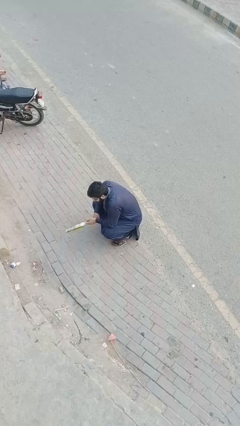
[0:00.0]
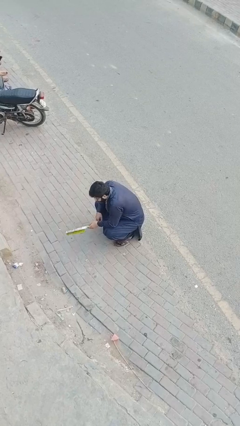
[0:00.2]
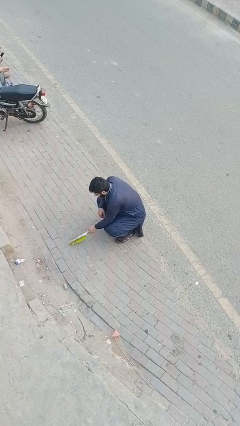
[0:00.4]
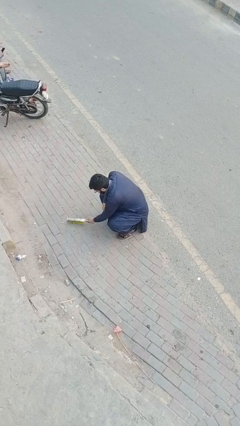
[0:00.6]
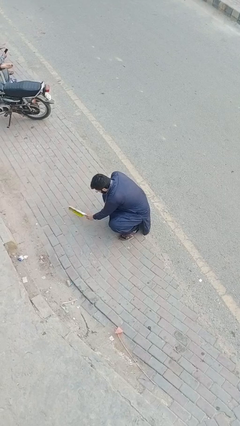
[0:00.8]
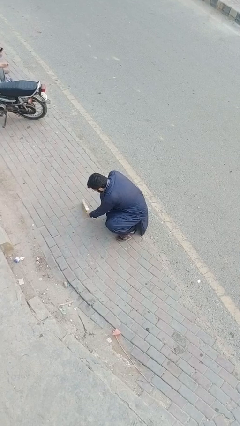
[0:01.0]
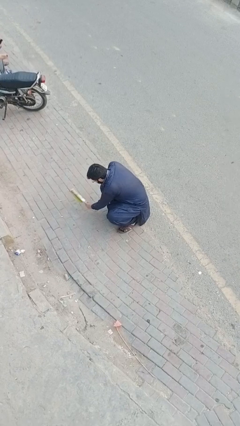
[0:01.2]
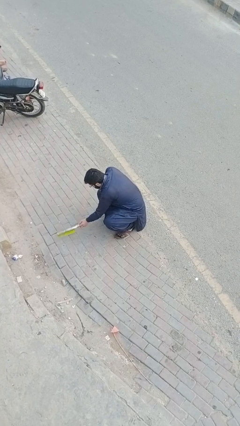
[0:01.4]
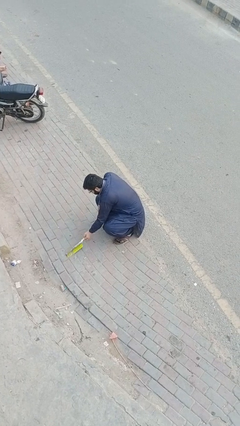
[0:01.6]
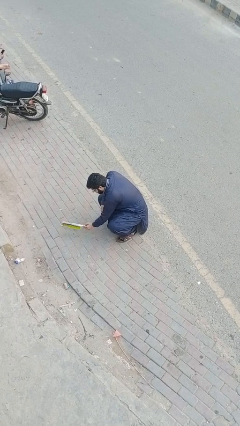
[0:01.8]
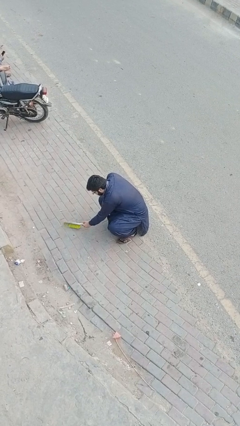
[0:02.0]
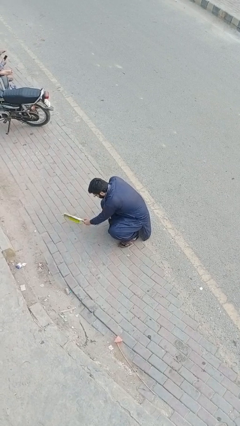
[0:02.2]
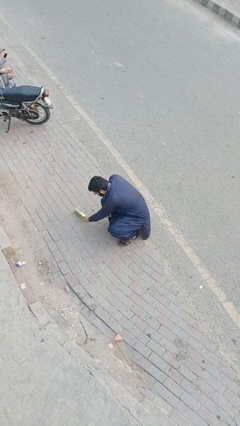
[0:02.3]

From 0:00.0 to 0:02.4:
person sweeps floor

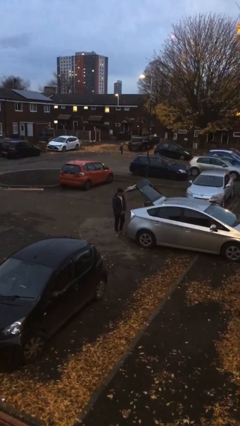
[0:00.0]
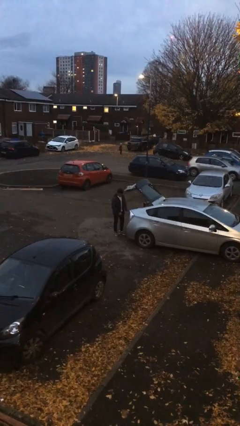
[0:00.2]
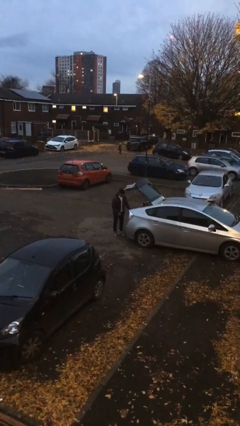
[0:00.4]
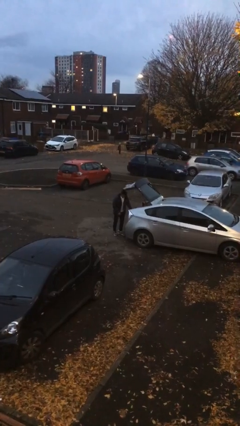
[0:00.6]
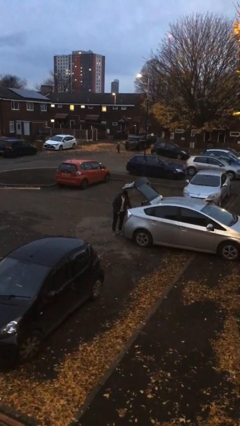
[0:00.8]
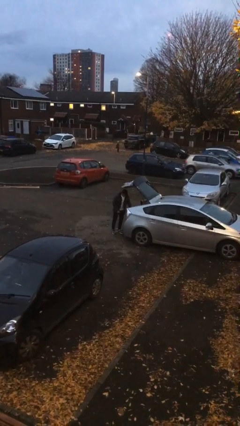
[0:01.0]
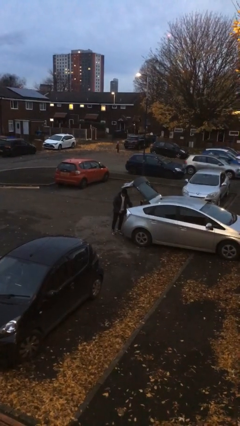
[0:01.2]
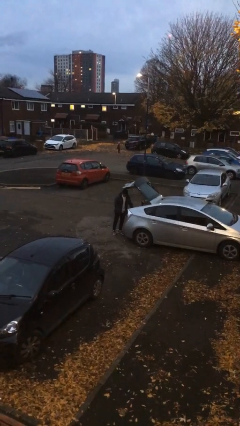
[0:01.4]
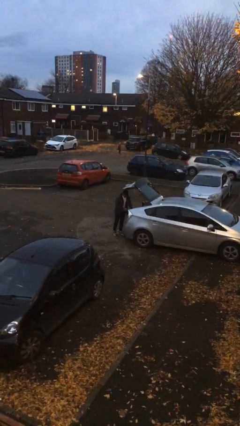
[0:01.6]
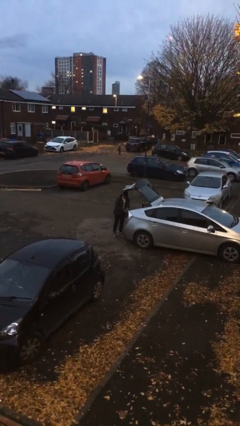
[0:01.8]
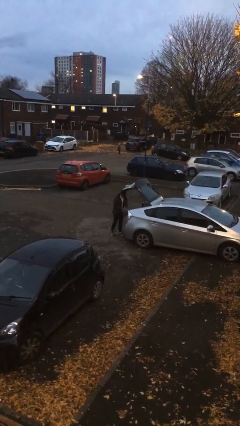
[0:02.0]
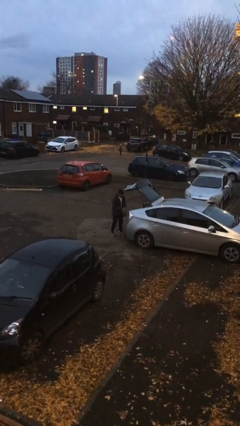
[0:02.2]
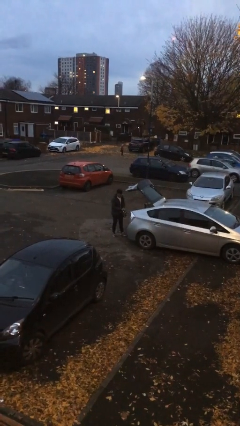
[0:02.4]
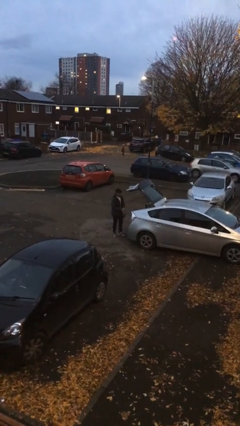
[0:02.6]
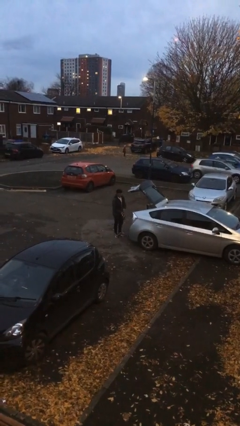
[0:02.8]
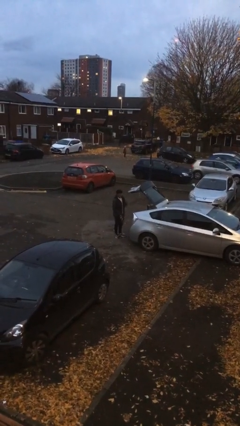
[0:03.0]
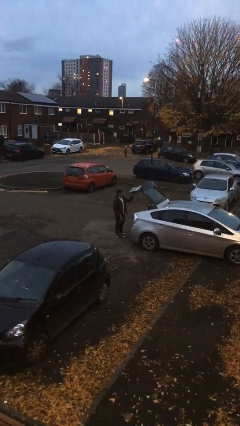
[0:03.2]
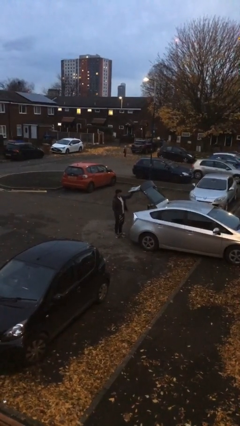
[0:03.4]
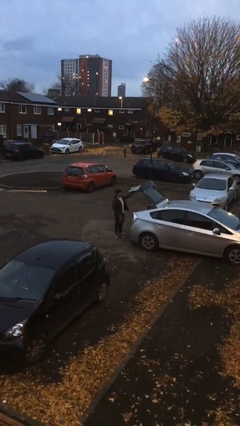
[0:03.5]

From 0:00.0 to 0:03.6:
person unloads car

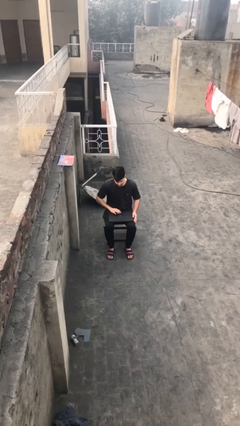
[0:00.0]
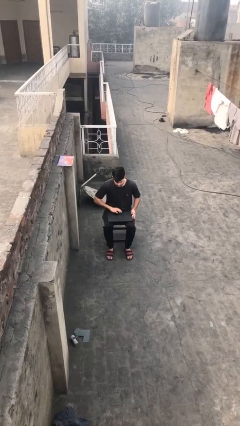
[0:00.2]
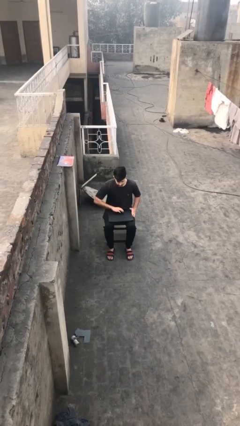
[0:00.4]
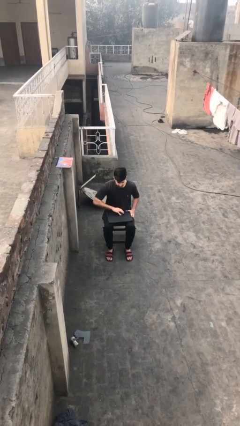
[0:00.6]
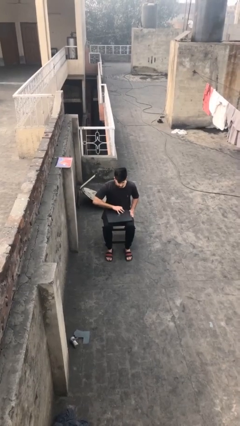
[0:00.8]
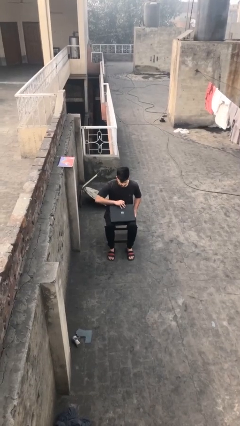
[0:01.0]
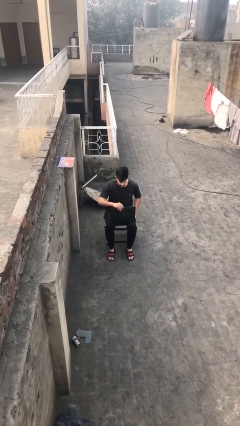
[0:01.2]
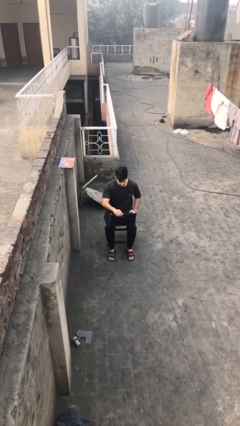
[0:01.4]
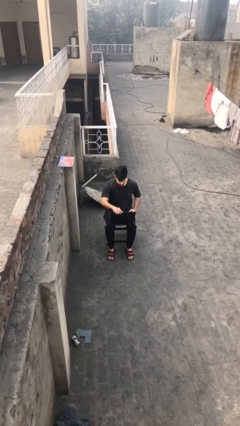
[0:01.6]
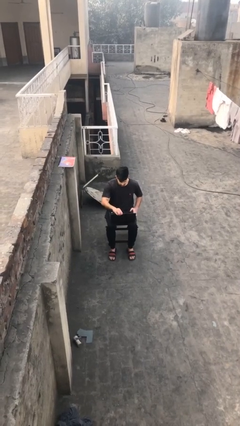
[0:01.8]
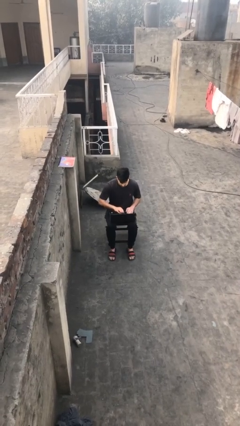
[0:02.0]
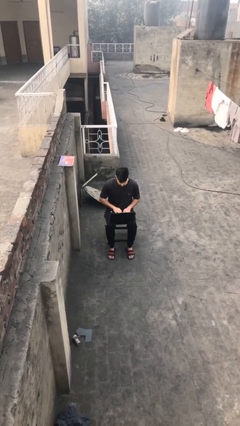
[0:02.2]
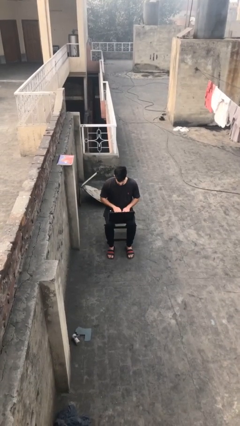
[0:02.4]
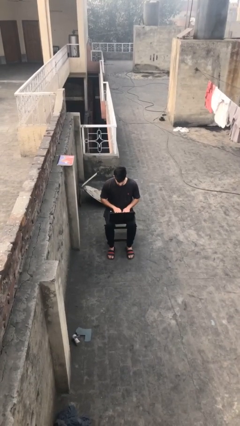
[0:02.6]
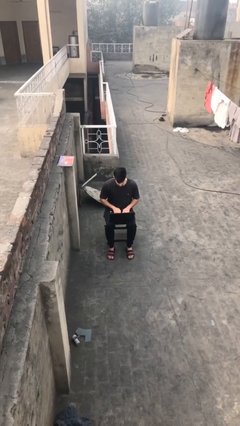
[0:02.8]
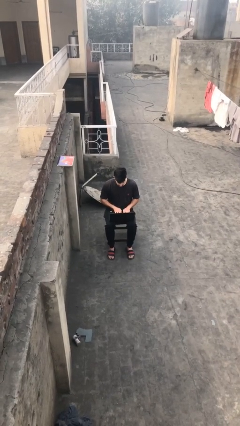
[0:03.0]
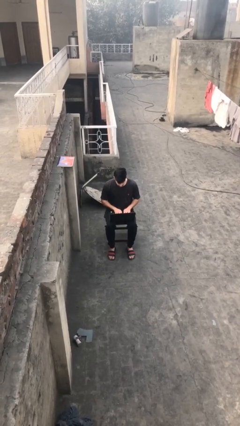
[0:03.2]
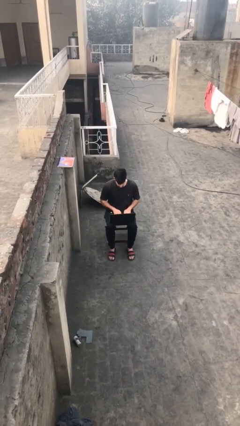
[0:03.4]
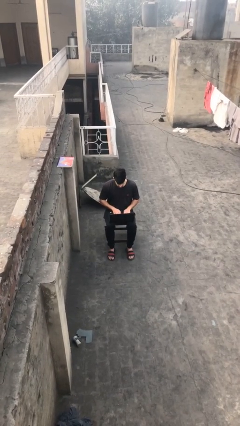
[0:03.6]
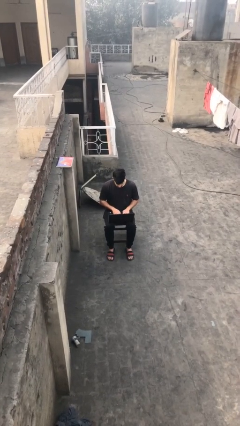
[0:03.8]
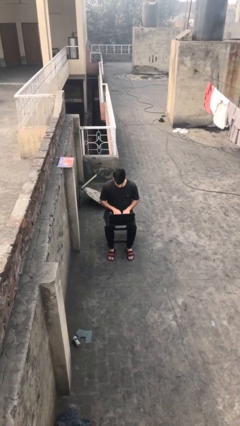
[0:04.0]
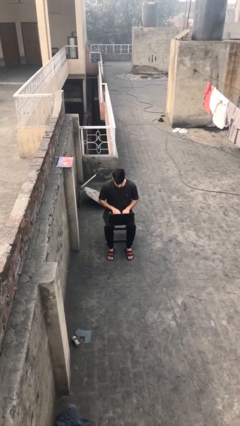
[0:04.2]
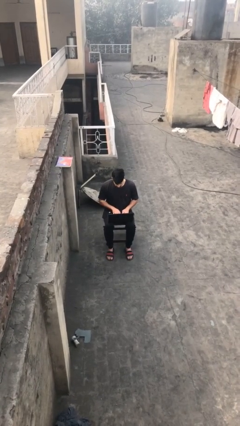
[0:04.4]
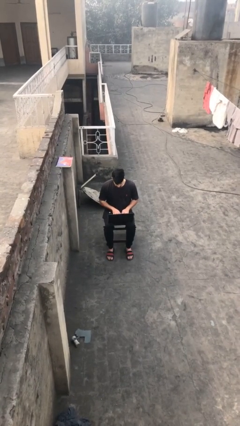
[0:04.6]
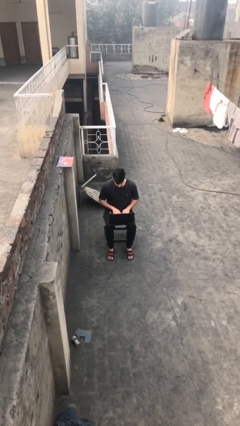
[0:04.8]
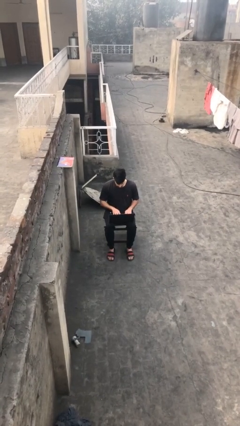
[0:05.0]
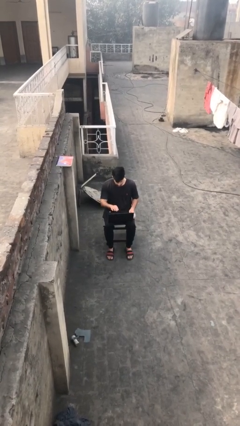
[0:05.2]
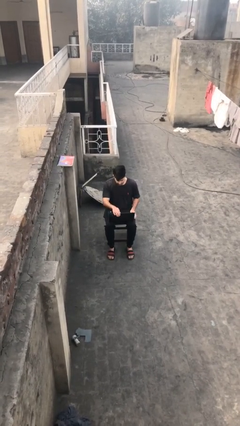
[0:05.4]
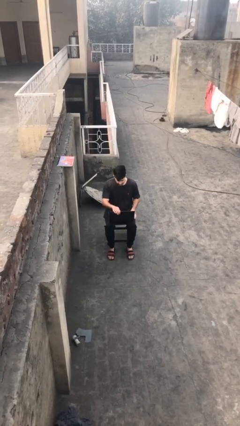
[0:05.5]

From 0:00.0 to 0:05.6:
person interacts with laptop

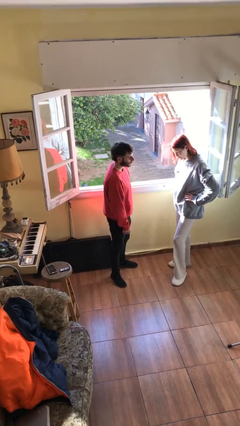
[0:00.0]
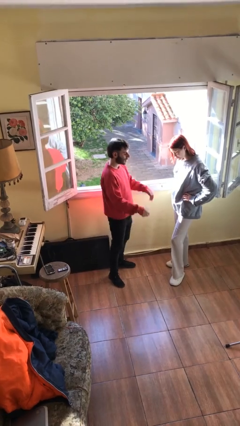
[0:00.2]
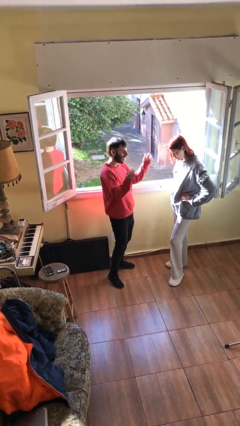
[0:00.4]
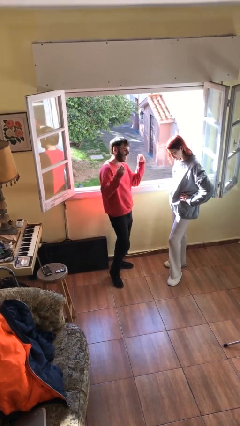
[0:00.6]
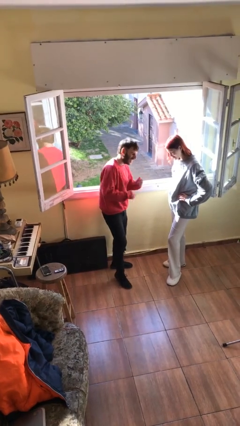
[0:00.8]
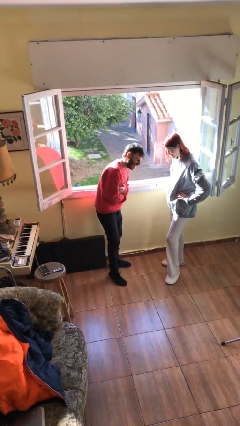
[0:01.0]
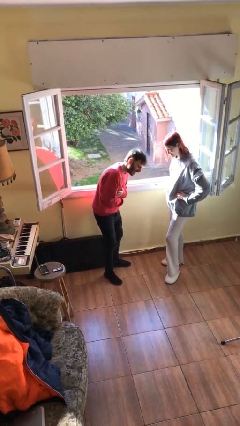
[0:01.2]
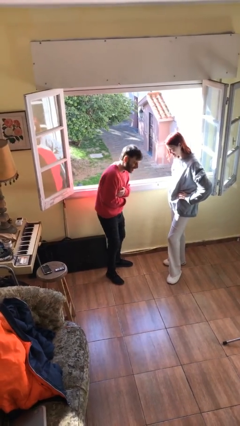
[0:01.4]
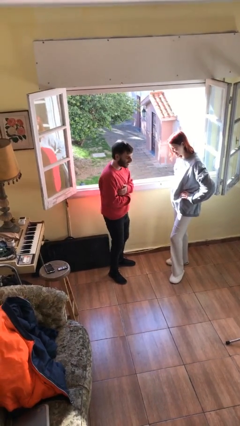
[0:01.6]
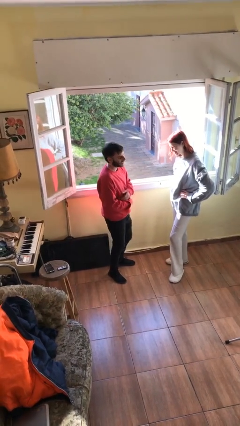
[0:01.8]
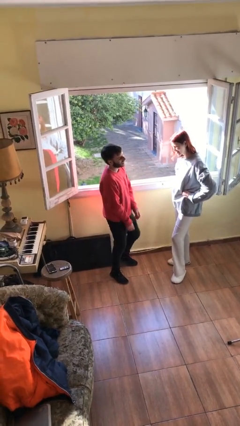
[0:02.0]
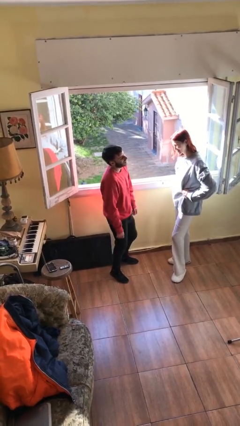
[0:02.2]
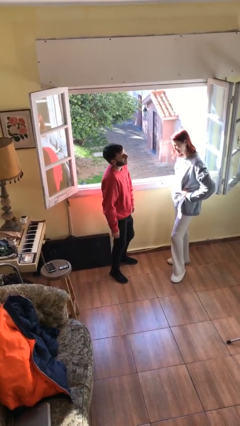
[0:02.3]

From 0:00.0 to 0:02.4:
person laughs with person

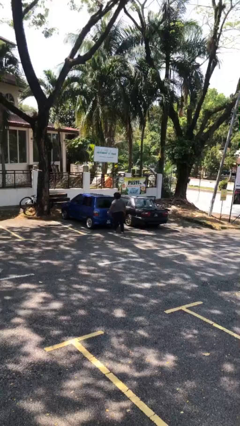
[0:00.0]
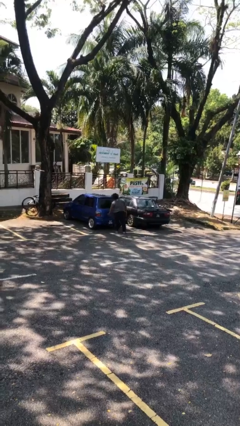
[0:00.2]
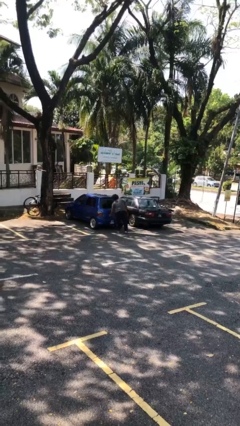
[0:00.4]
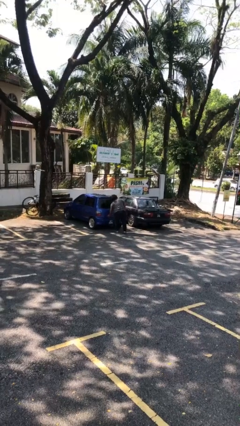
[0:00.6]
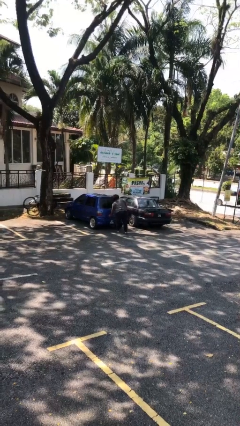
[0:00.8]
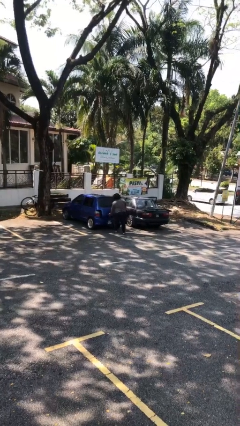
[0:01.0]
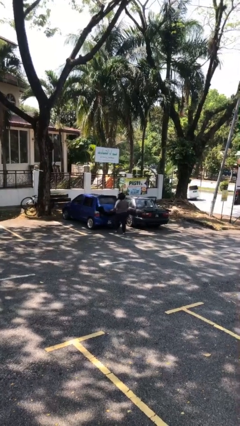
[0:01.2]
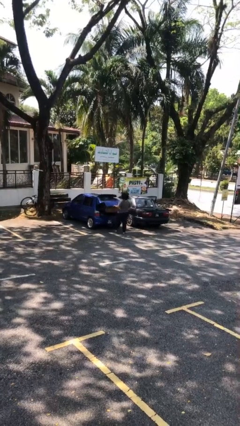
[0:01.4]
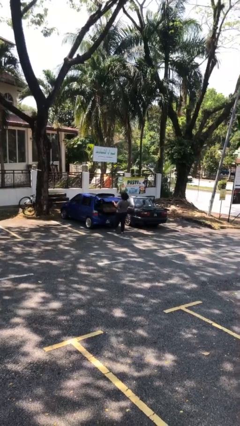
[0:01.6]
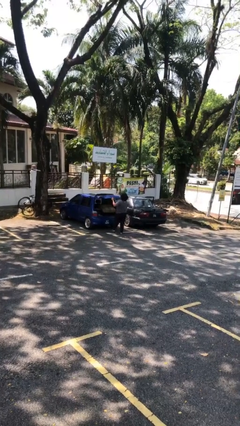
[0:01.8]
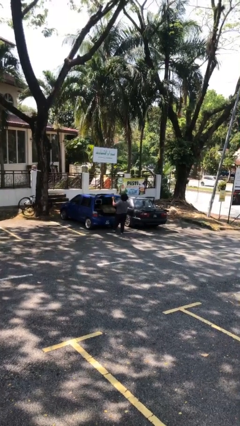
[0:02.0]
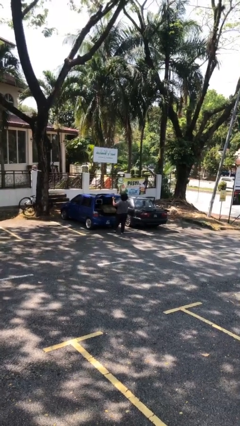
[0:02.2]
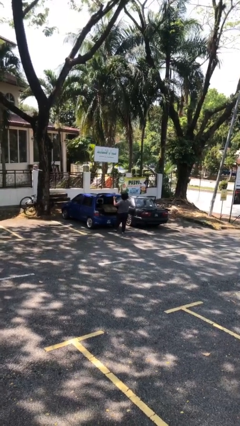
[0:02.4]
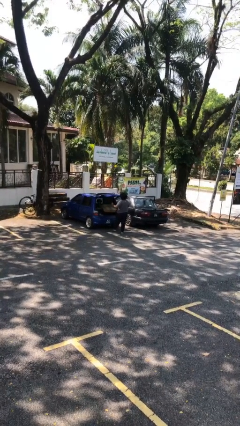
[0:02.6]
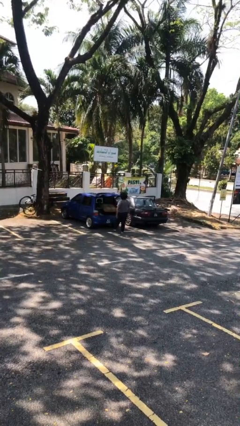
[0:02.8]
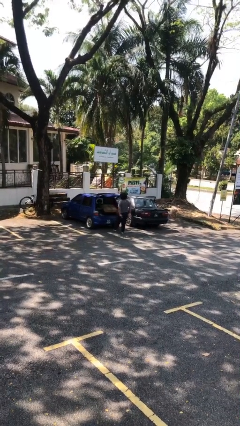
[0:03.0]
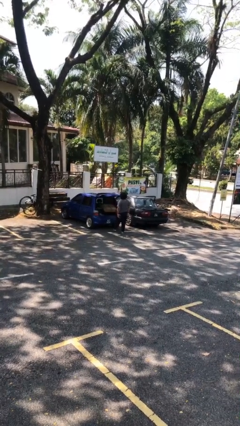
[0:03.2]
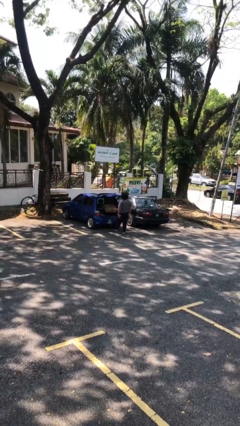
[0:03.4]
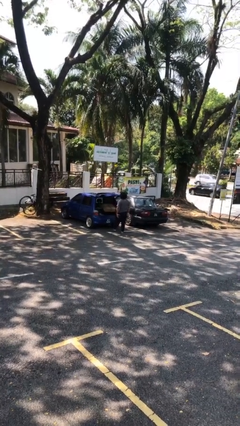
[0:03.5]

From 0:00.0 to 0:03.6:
person opens car trunk

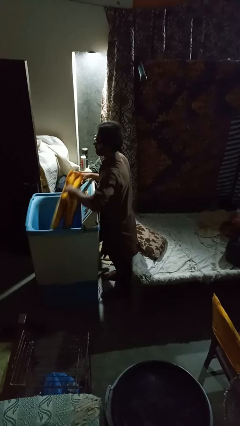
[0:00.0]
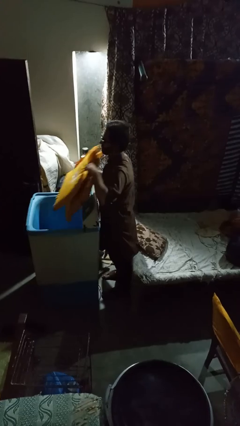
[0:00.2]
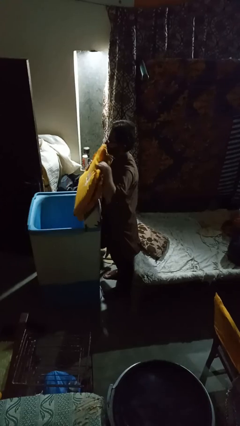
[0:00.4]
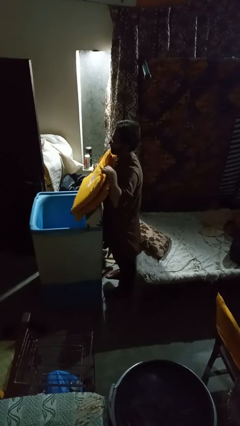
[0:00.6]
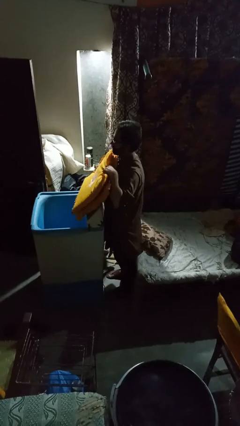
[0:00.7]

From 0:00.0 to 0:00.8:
person unloads clotheswasher
